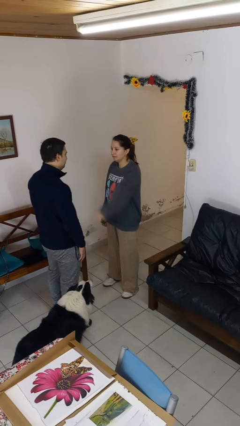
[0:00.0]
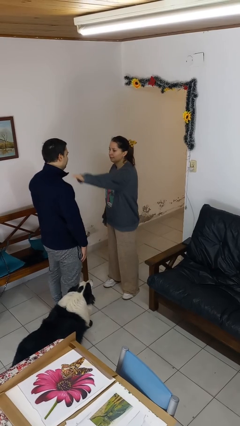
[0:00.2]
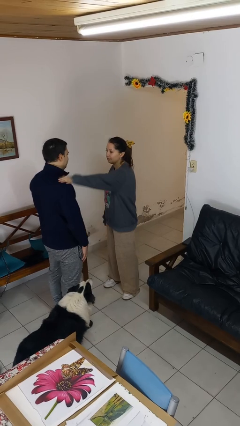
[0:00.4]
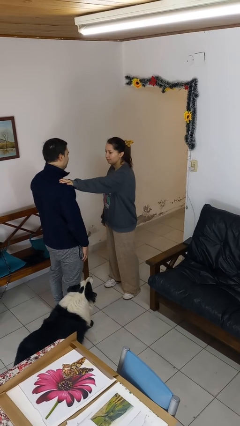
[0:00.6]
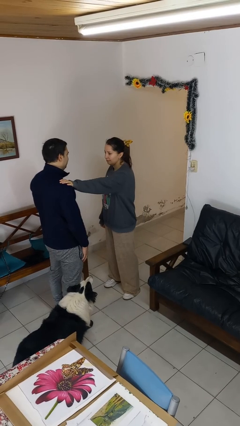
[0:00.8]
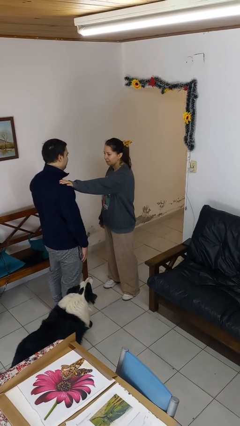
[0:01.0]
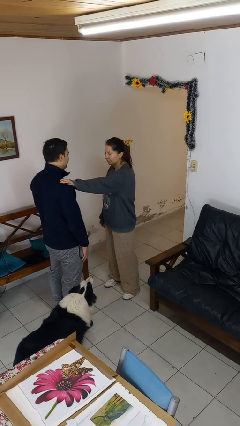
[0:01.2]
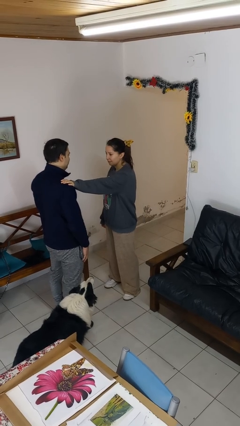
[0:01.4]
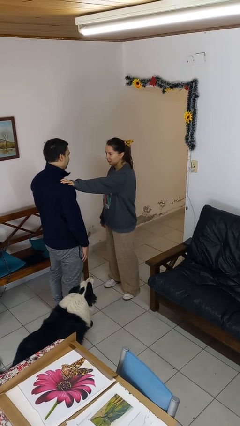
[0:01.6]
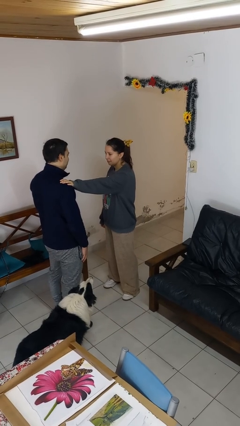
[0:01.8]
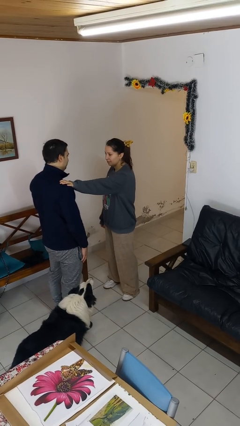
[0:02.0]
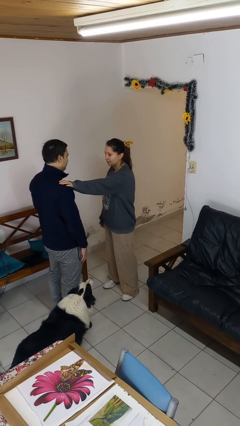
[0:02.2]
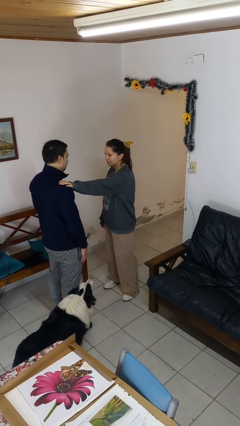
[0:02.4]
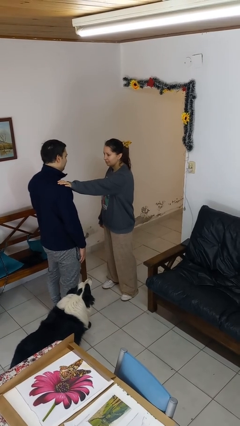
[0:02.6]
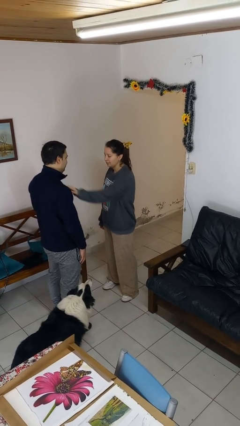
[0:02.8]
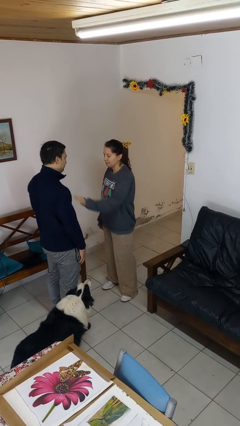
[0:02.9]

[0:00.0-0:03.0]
person pounds shoulders of person

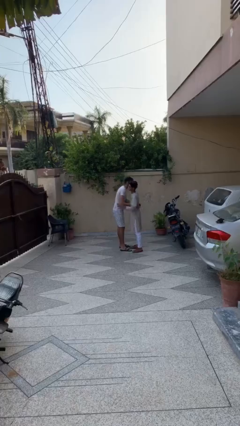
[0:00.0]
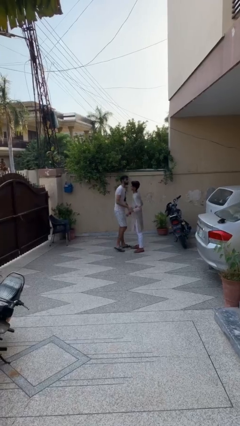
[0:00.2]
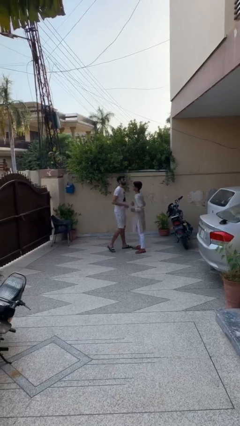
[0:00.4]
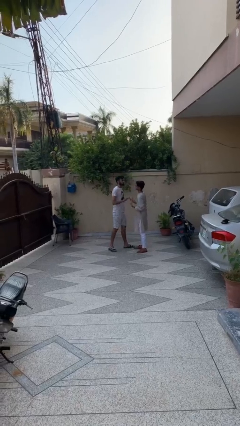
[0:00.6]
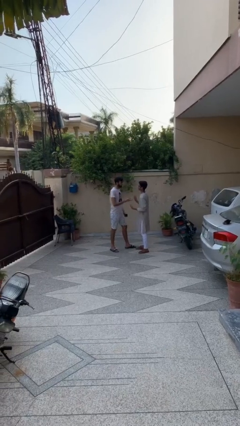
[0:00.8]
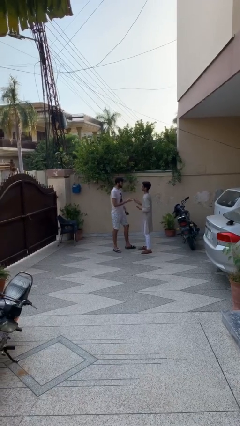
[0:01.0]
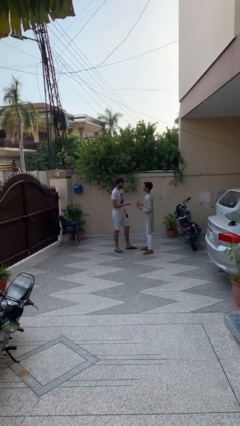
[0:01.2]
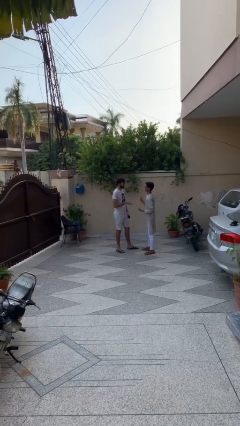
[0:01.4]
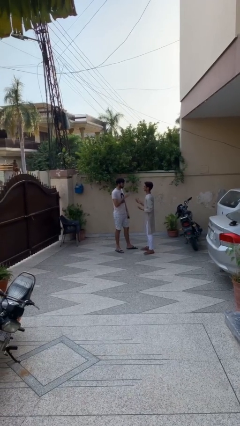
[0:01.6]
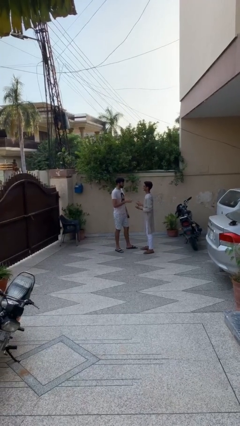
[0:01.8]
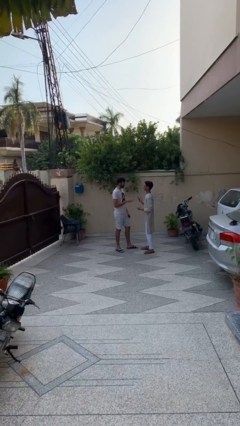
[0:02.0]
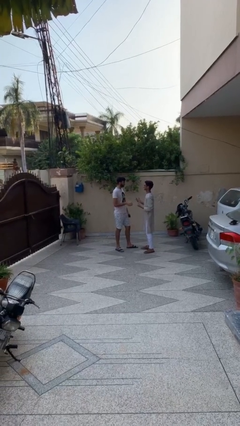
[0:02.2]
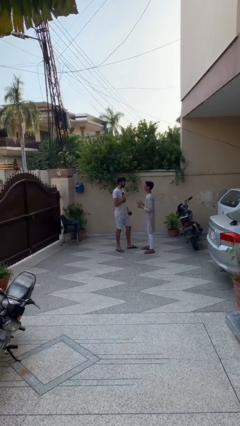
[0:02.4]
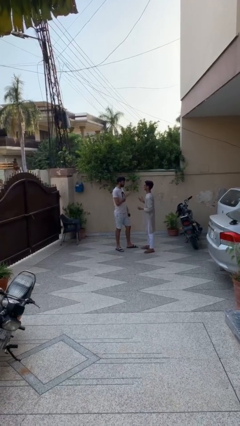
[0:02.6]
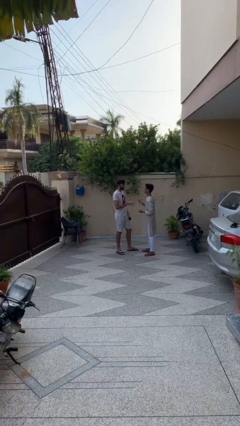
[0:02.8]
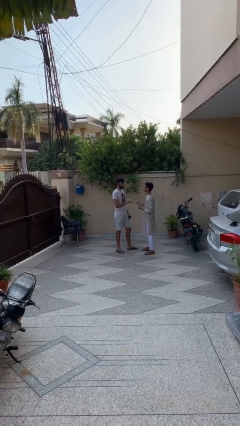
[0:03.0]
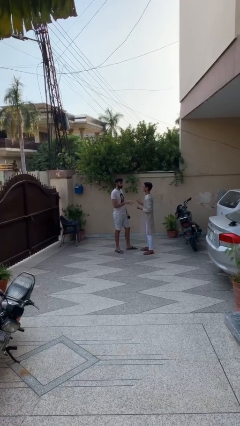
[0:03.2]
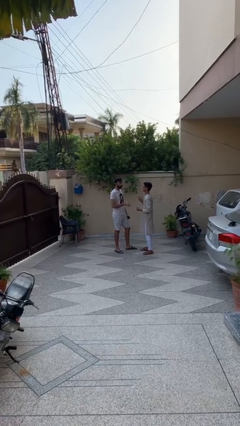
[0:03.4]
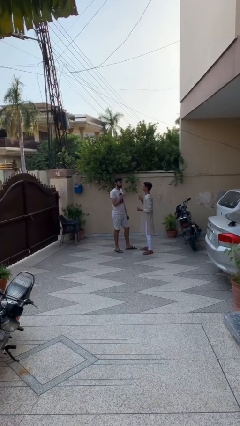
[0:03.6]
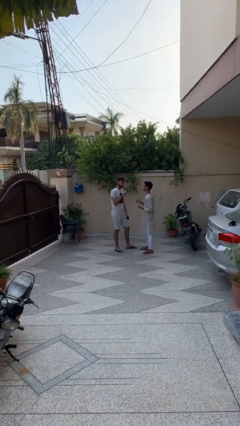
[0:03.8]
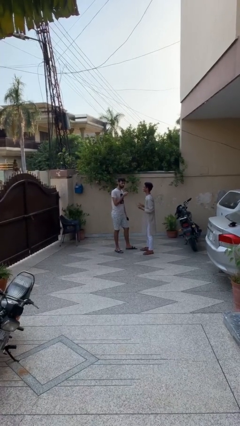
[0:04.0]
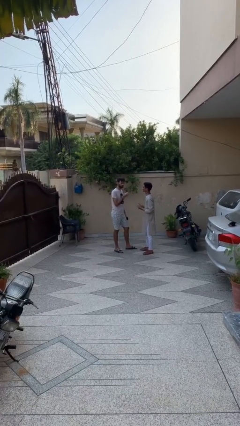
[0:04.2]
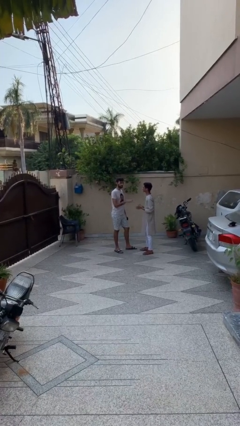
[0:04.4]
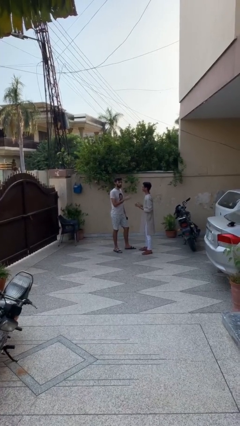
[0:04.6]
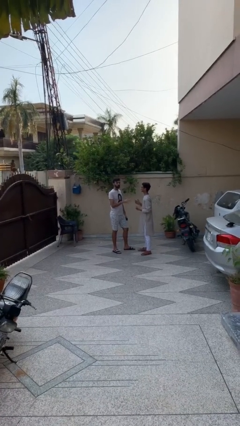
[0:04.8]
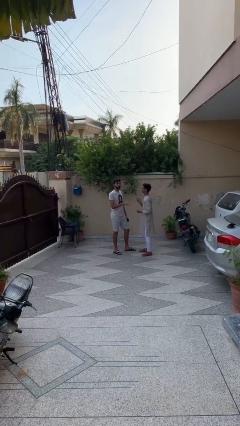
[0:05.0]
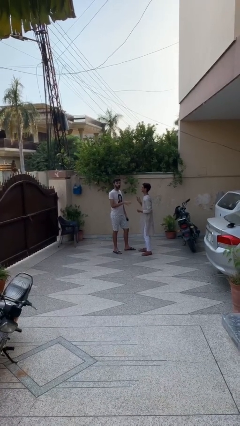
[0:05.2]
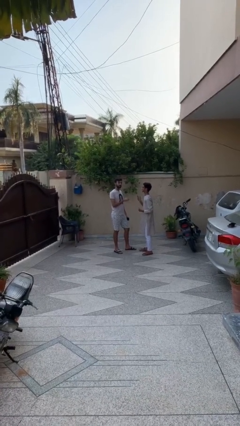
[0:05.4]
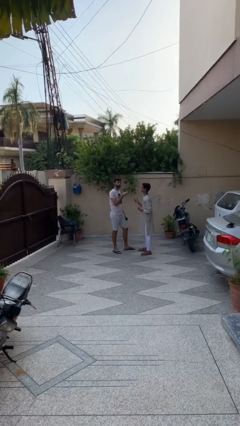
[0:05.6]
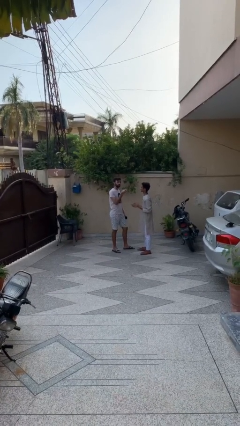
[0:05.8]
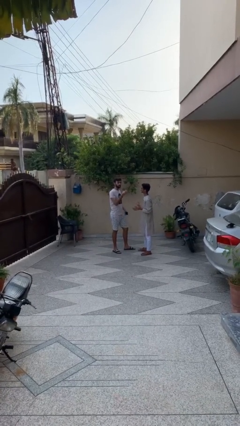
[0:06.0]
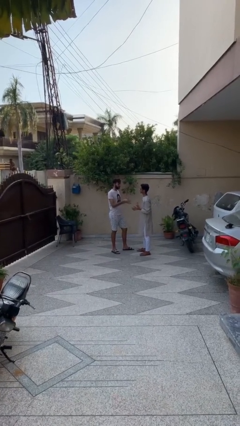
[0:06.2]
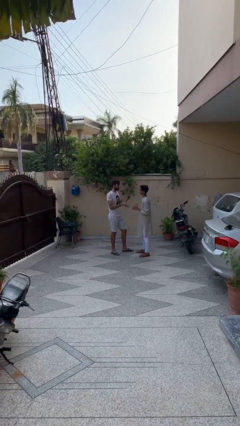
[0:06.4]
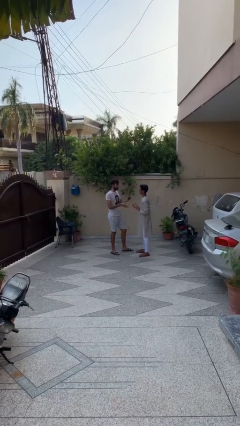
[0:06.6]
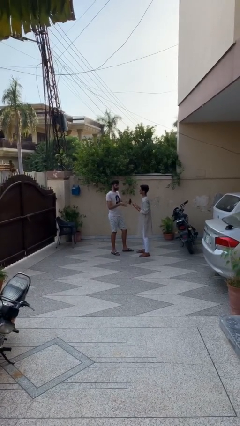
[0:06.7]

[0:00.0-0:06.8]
person talks to person

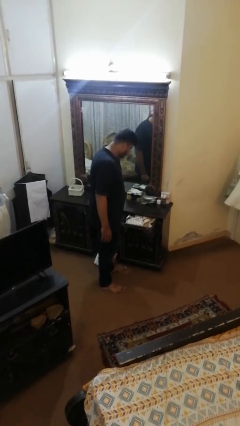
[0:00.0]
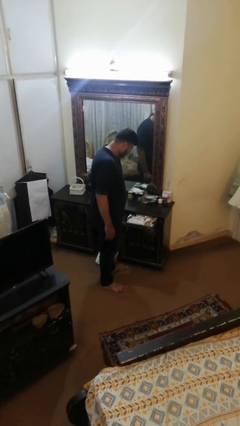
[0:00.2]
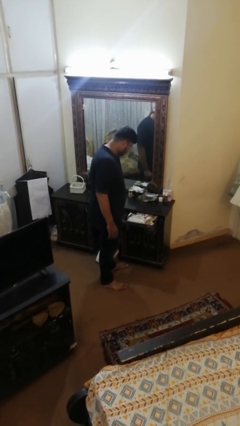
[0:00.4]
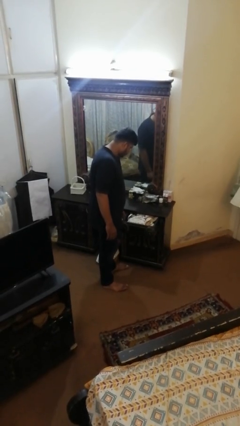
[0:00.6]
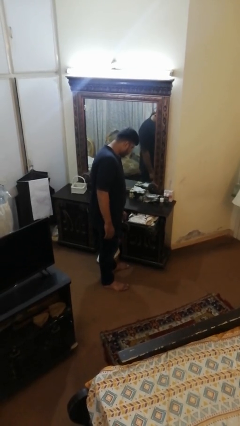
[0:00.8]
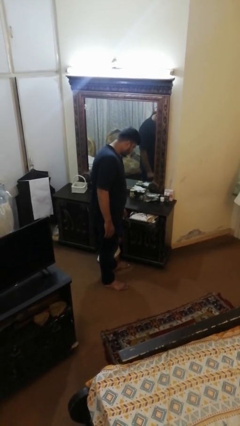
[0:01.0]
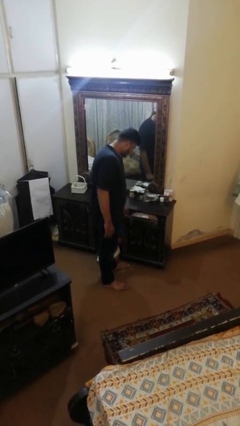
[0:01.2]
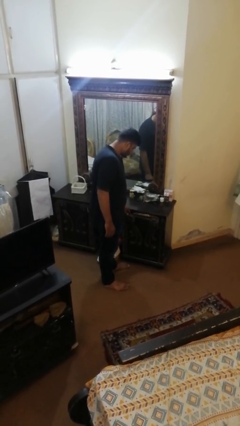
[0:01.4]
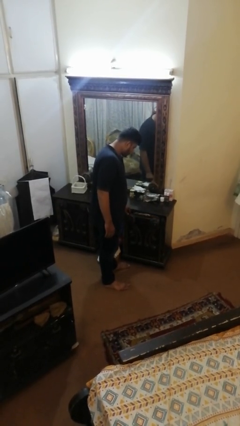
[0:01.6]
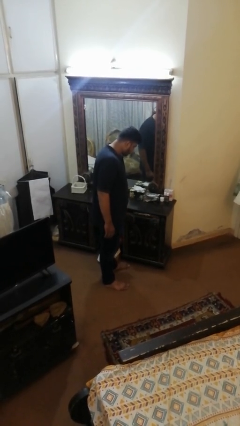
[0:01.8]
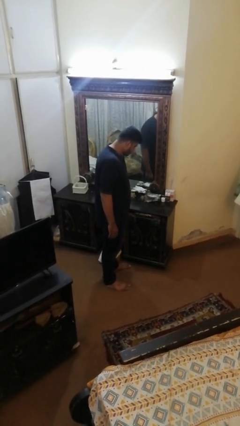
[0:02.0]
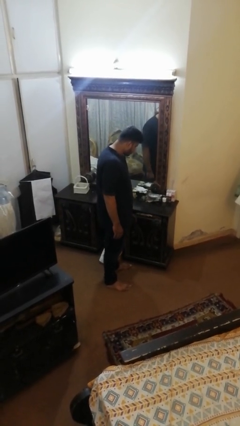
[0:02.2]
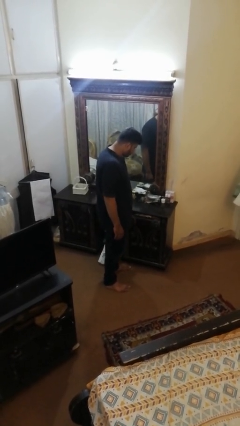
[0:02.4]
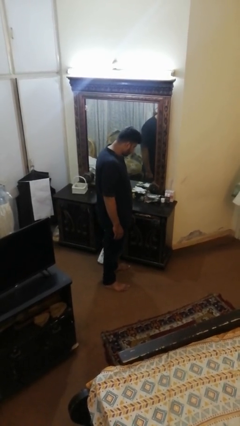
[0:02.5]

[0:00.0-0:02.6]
person closes dresser drawer

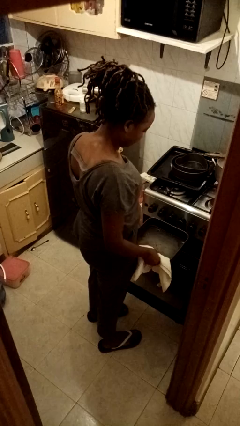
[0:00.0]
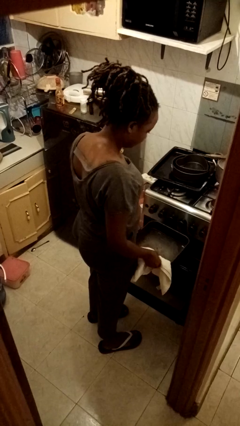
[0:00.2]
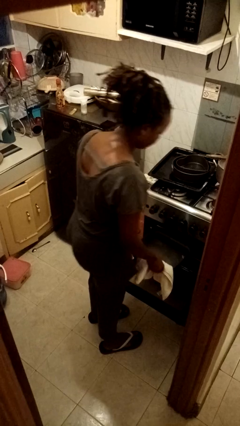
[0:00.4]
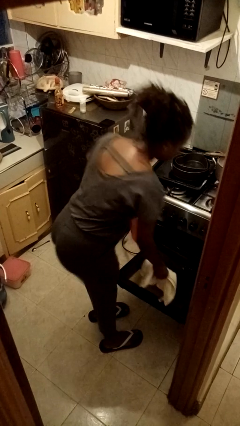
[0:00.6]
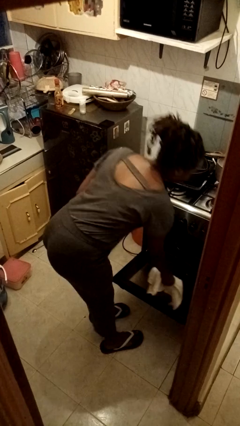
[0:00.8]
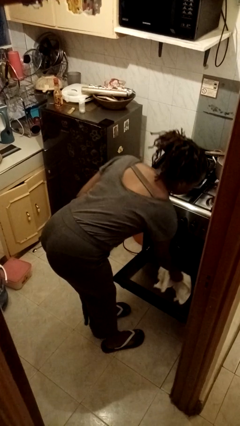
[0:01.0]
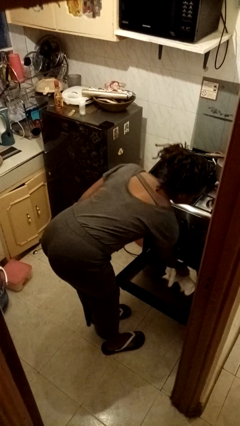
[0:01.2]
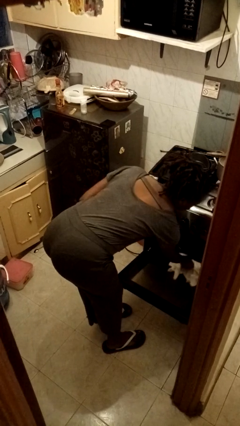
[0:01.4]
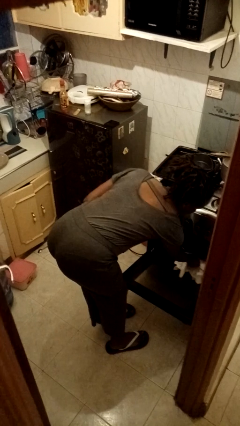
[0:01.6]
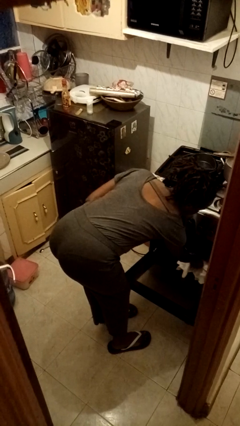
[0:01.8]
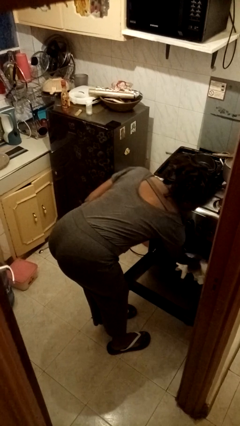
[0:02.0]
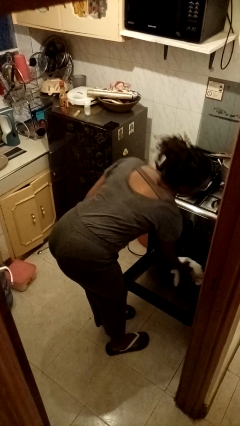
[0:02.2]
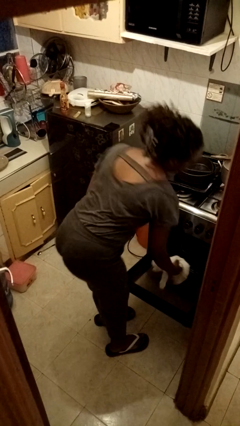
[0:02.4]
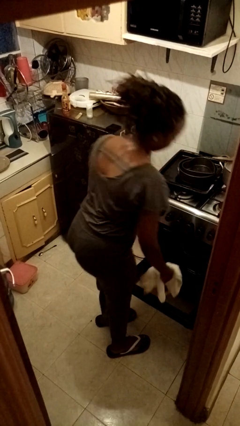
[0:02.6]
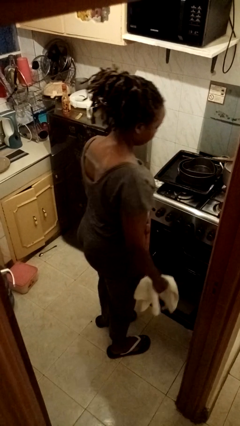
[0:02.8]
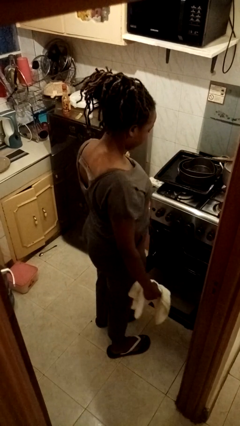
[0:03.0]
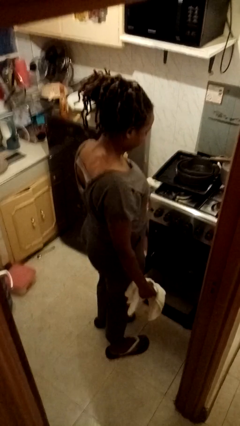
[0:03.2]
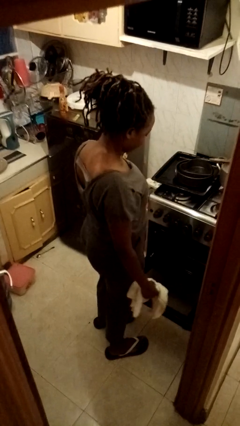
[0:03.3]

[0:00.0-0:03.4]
person puts object into oven

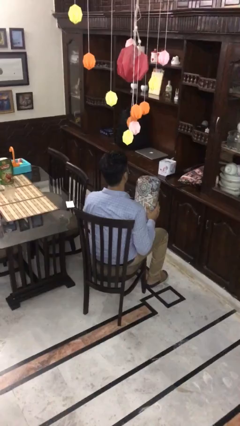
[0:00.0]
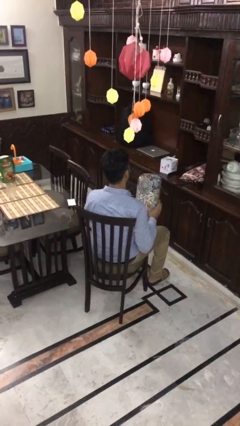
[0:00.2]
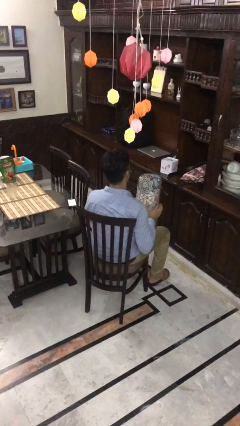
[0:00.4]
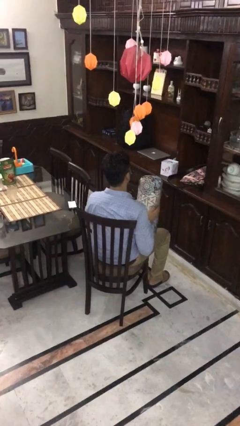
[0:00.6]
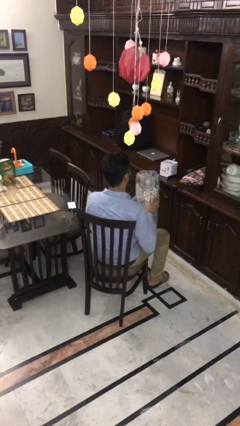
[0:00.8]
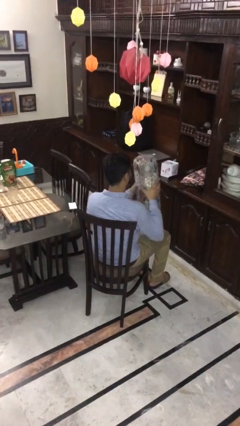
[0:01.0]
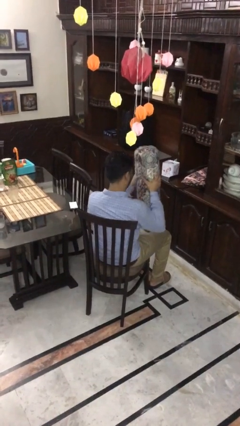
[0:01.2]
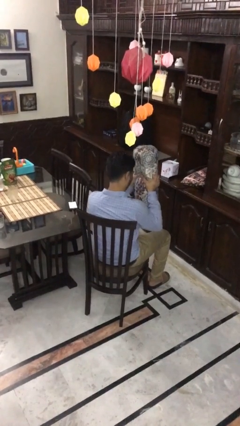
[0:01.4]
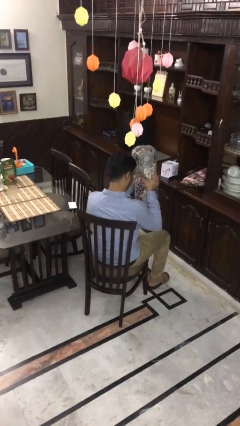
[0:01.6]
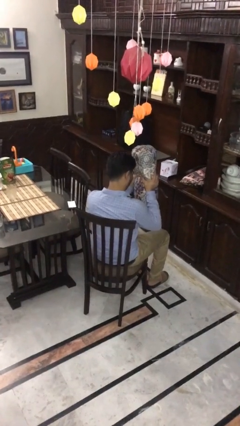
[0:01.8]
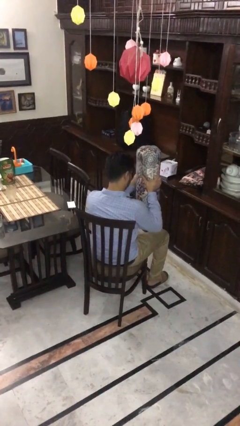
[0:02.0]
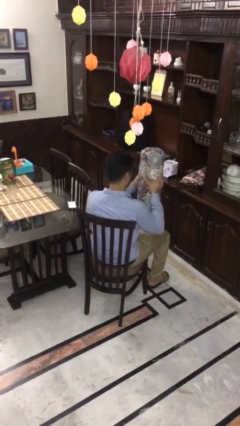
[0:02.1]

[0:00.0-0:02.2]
person squeezes object
